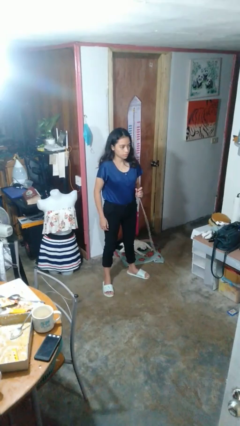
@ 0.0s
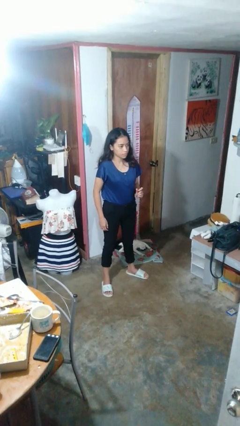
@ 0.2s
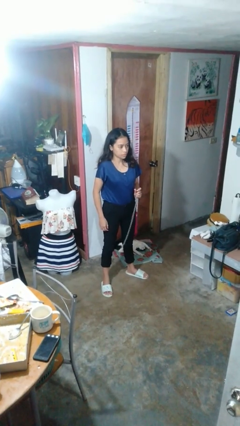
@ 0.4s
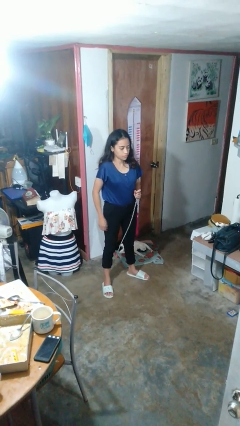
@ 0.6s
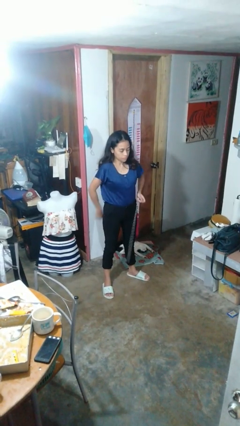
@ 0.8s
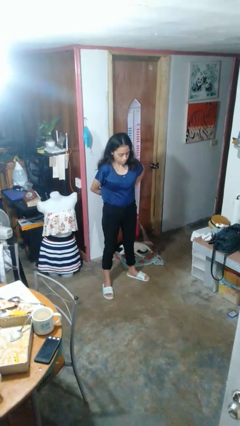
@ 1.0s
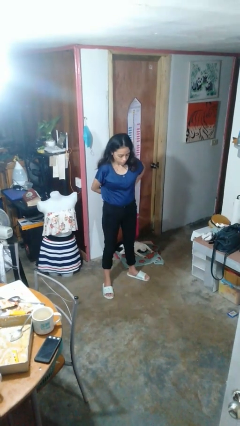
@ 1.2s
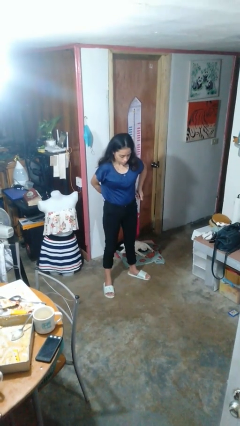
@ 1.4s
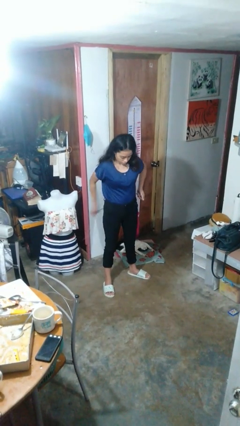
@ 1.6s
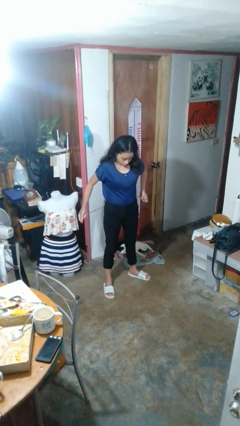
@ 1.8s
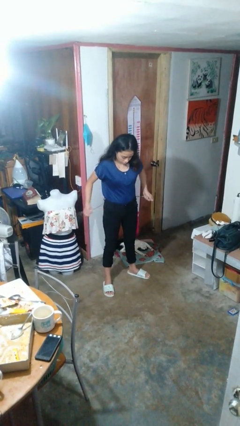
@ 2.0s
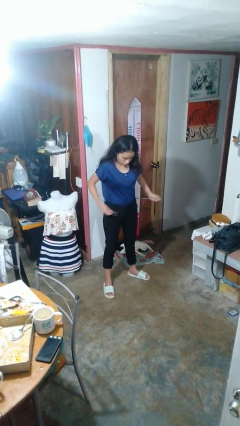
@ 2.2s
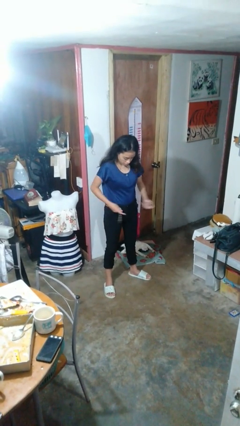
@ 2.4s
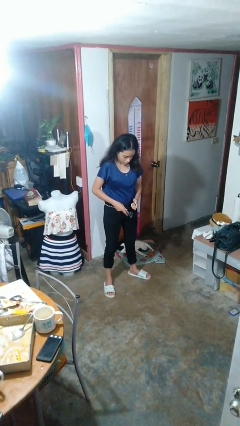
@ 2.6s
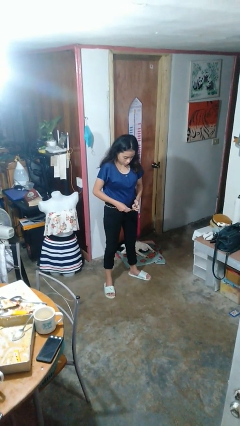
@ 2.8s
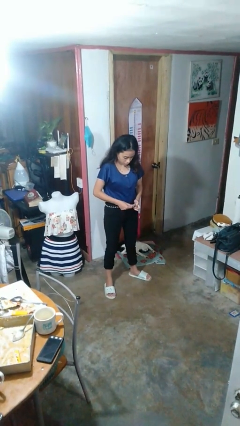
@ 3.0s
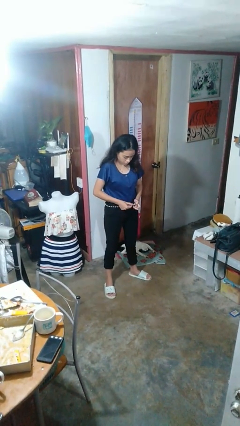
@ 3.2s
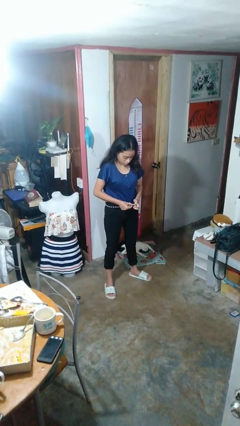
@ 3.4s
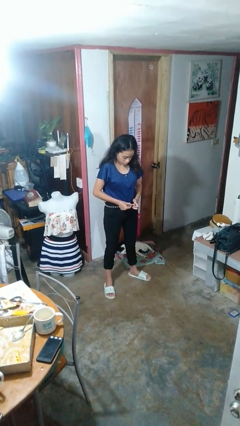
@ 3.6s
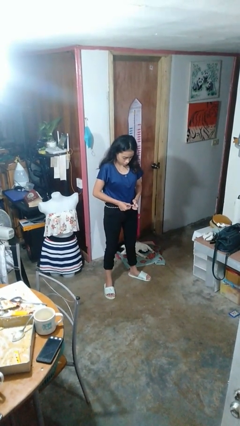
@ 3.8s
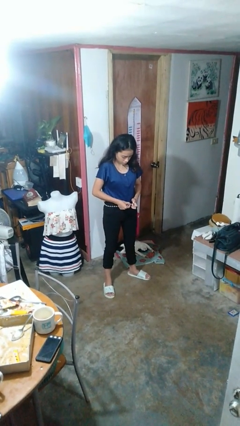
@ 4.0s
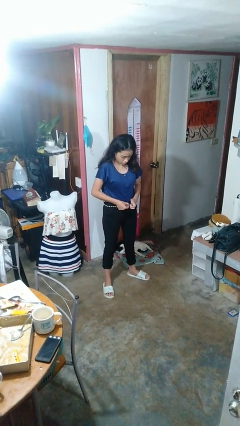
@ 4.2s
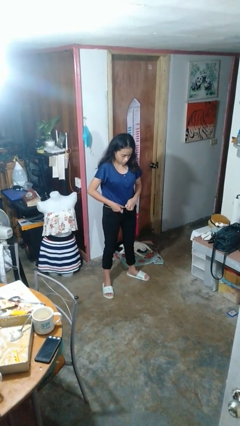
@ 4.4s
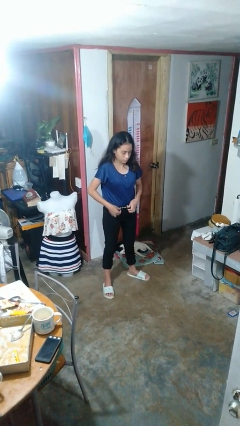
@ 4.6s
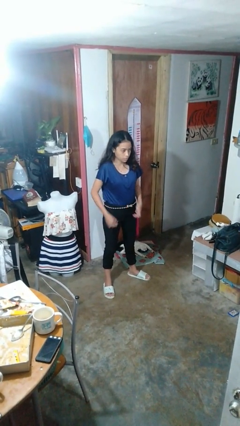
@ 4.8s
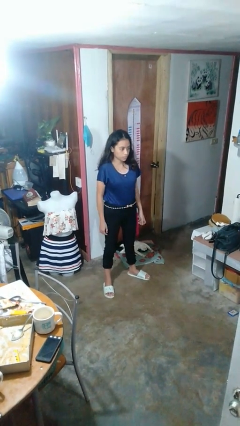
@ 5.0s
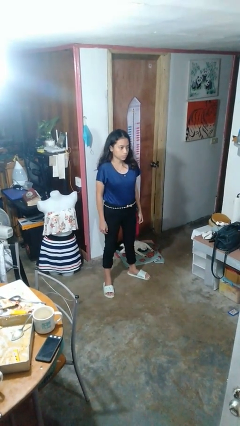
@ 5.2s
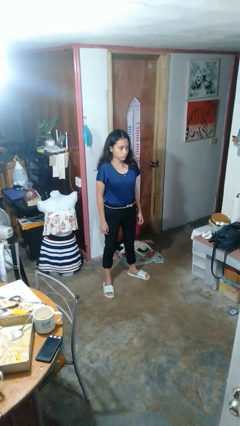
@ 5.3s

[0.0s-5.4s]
person puts on belt

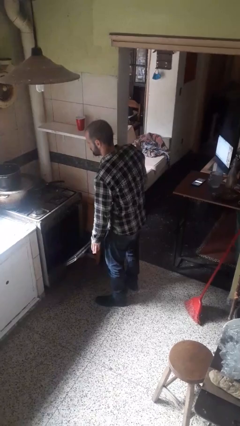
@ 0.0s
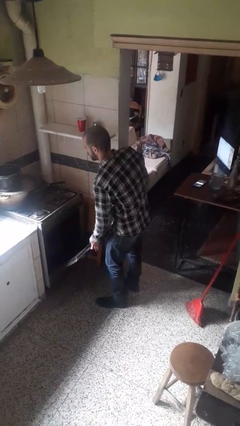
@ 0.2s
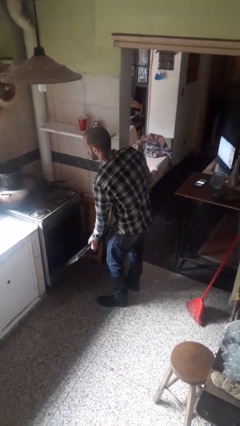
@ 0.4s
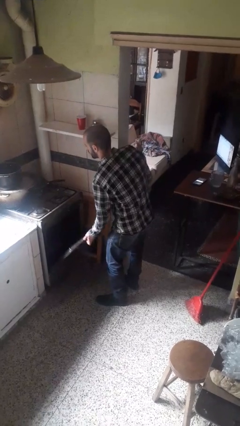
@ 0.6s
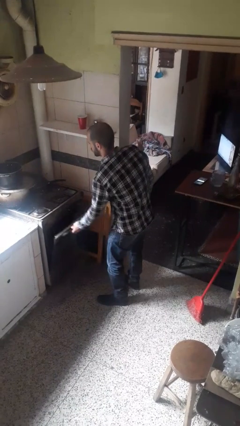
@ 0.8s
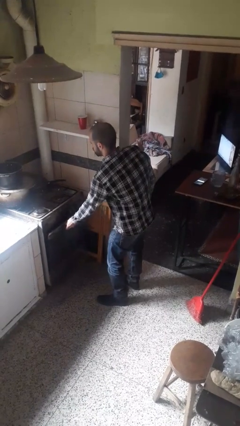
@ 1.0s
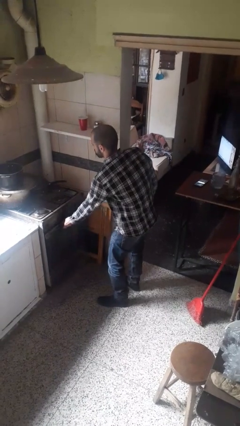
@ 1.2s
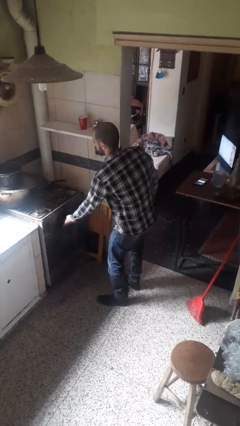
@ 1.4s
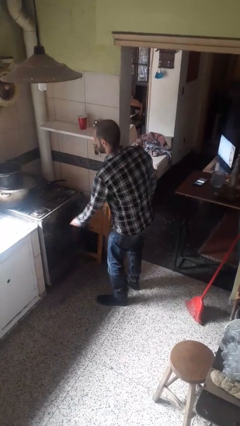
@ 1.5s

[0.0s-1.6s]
person closes oven door

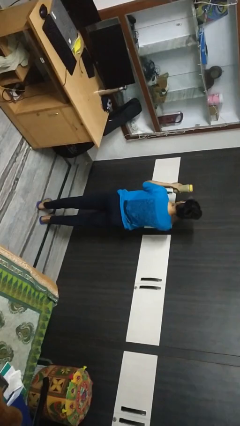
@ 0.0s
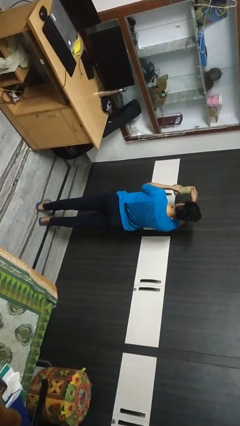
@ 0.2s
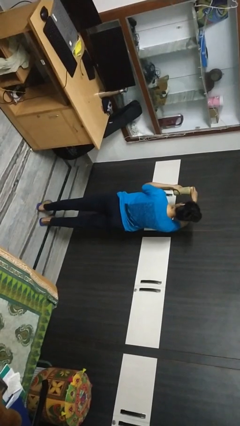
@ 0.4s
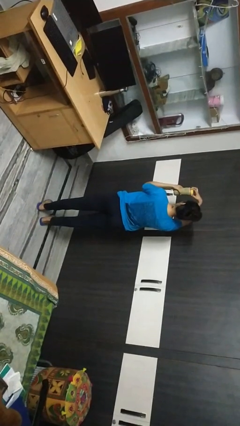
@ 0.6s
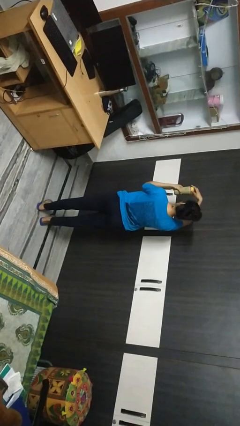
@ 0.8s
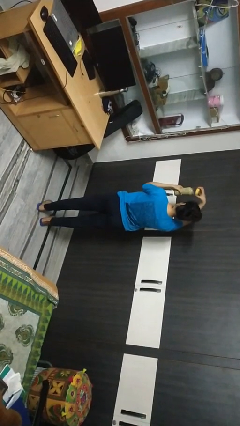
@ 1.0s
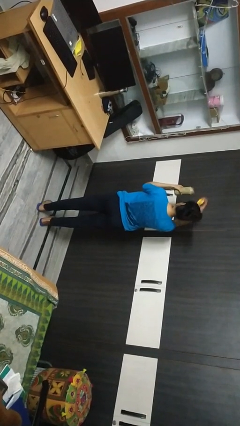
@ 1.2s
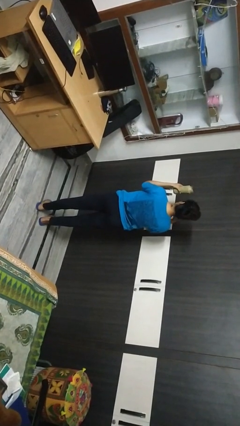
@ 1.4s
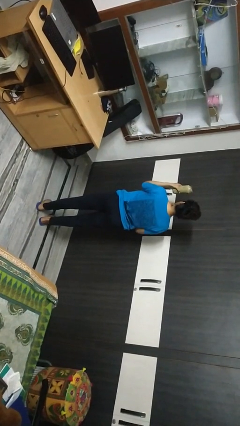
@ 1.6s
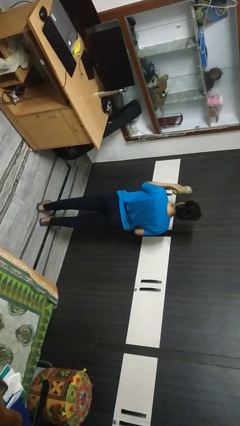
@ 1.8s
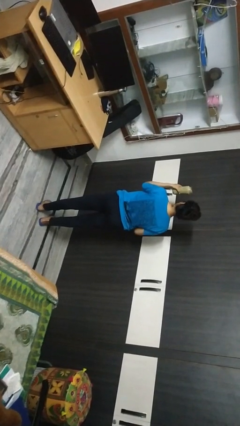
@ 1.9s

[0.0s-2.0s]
person opens jar

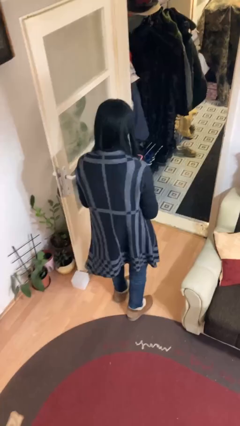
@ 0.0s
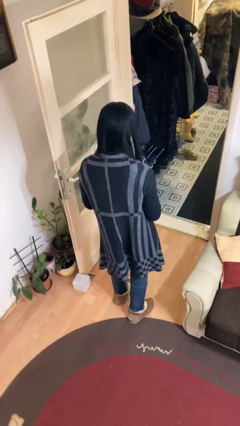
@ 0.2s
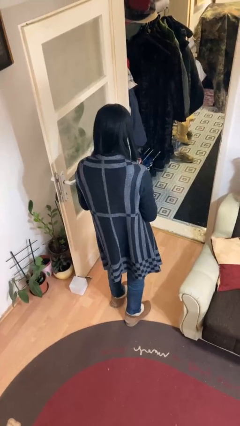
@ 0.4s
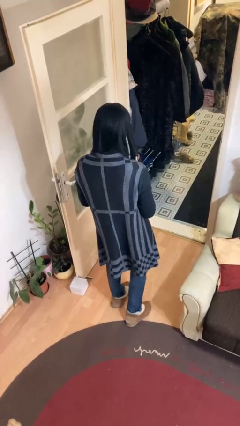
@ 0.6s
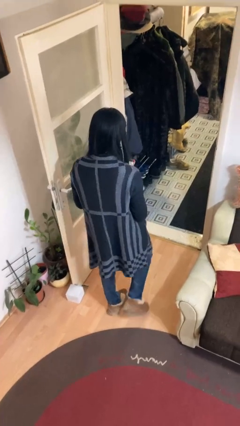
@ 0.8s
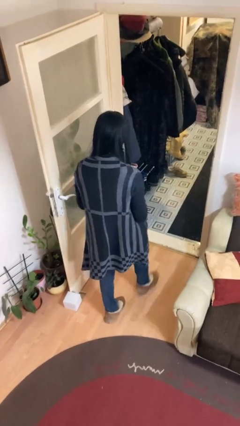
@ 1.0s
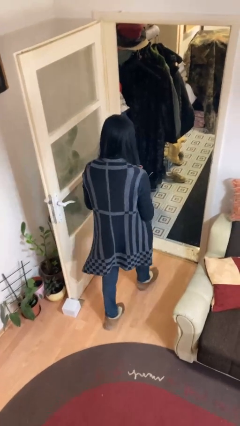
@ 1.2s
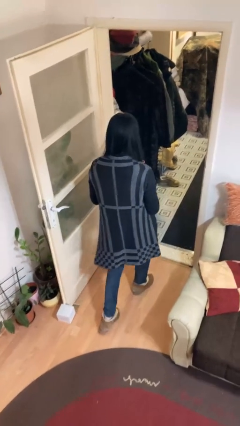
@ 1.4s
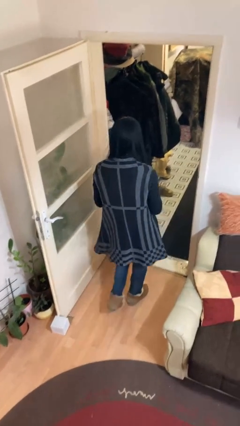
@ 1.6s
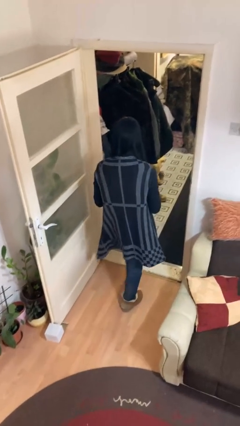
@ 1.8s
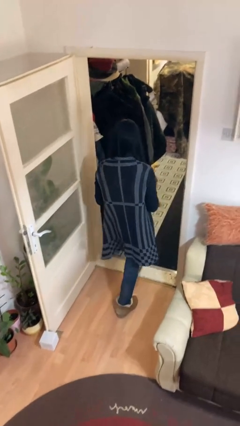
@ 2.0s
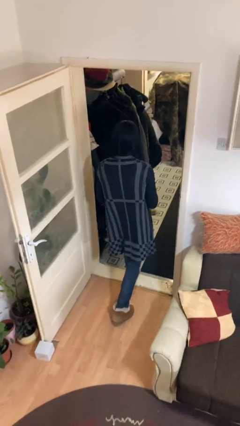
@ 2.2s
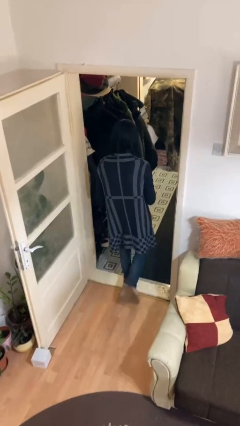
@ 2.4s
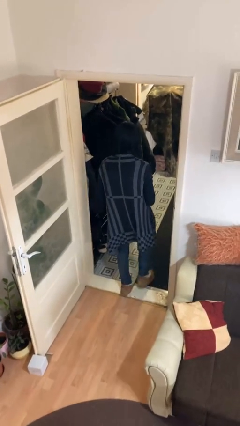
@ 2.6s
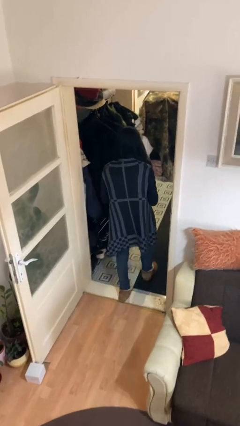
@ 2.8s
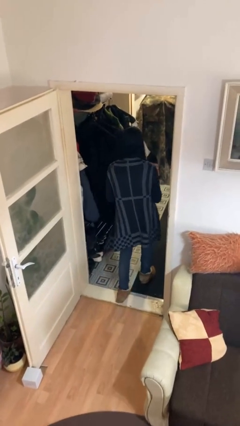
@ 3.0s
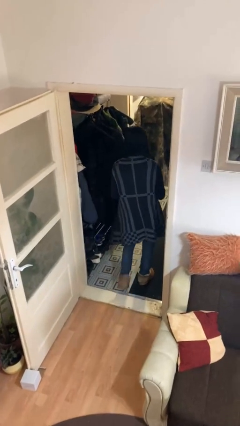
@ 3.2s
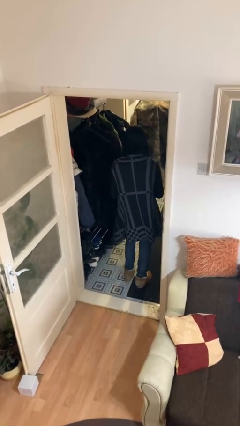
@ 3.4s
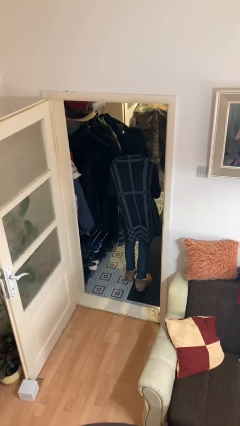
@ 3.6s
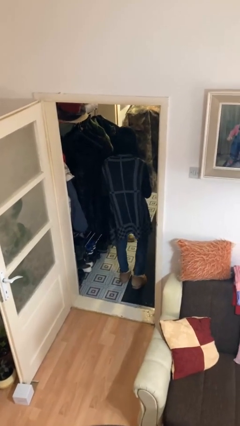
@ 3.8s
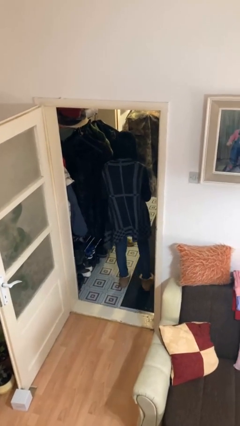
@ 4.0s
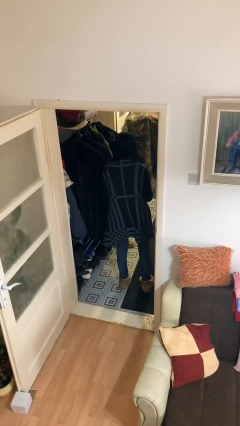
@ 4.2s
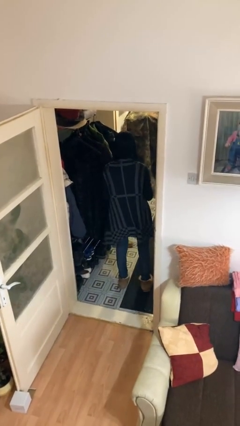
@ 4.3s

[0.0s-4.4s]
person exits scene through structure

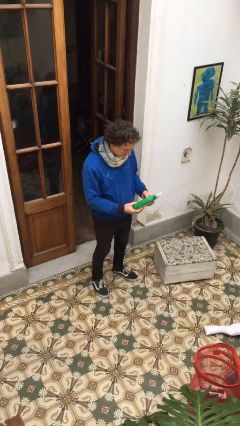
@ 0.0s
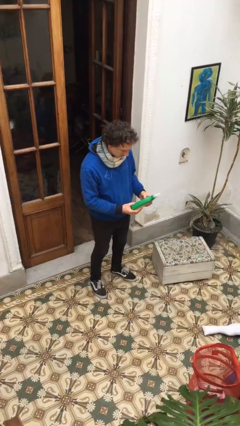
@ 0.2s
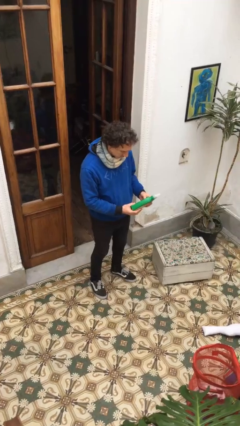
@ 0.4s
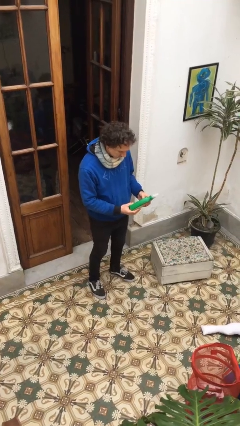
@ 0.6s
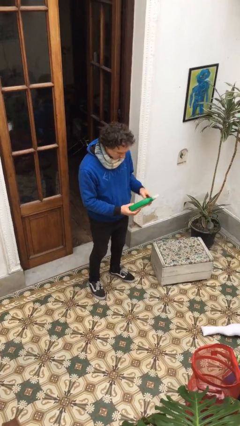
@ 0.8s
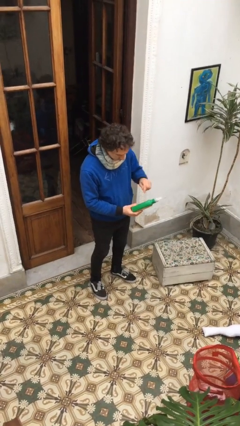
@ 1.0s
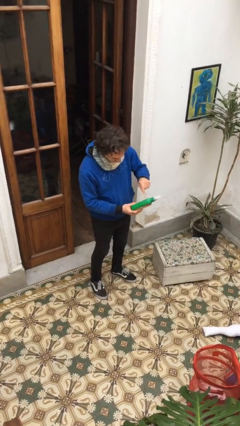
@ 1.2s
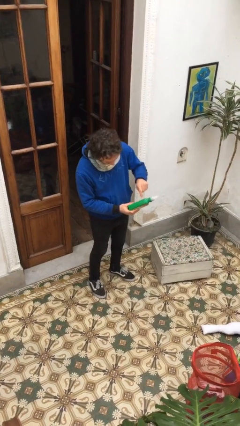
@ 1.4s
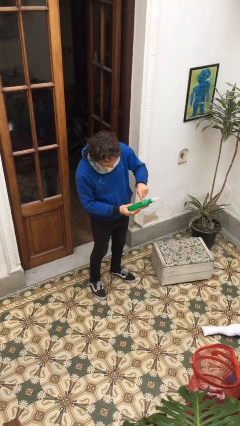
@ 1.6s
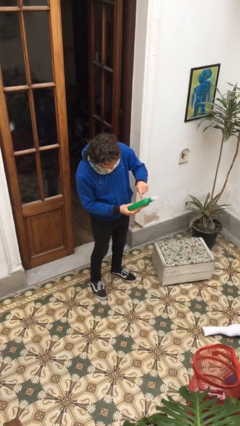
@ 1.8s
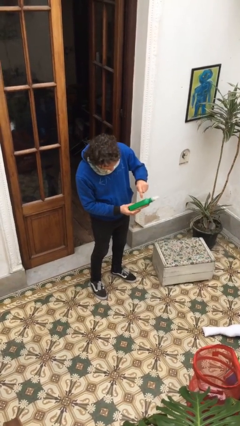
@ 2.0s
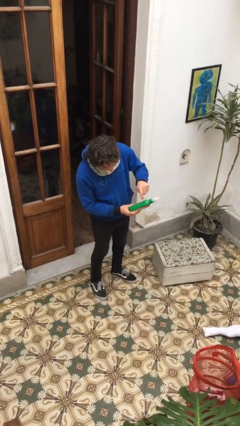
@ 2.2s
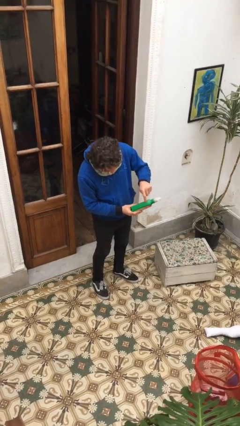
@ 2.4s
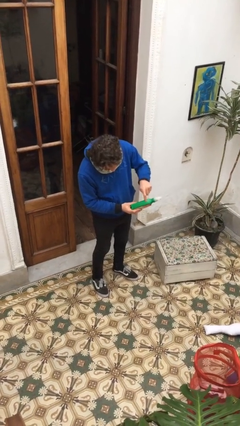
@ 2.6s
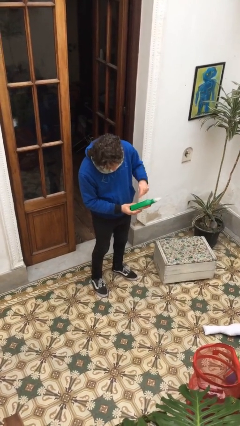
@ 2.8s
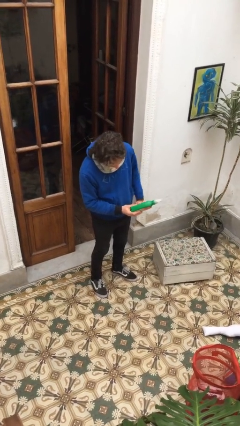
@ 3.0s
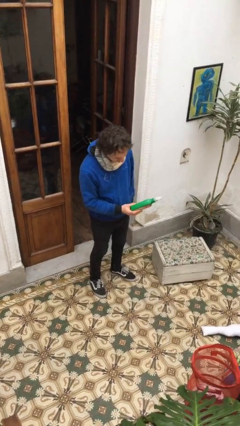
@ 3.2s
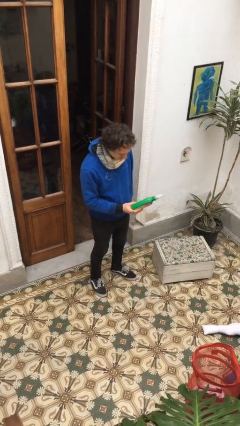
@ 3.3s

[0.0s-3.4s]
person taps object with finger

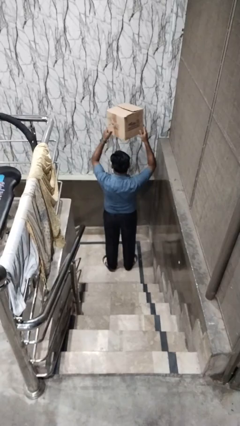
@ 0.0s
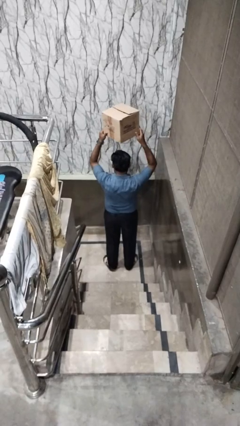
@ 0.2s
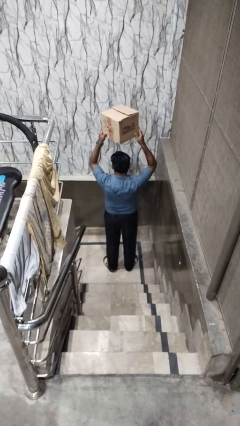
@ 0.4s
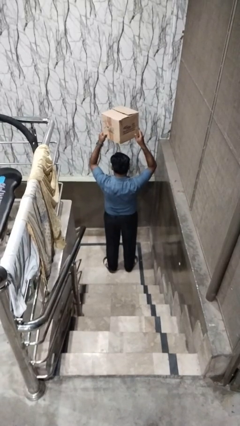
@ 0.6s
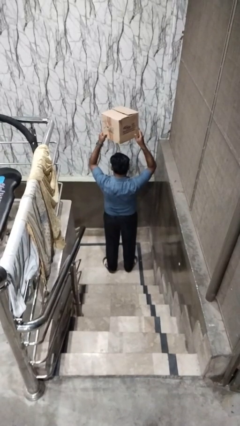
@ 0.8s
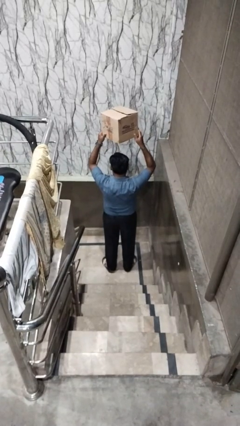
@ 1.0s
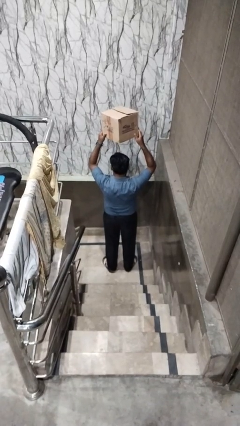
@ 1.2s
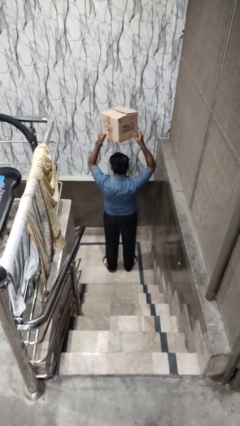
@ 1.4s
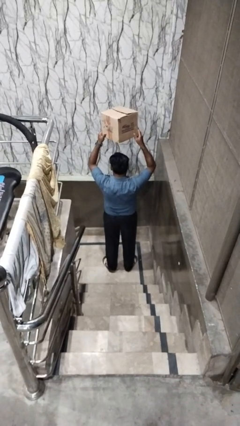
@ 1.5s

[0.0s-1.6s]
person holds object above head
